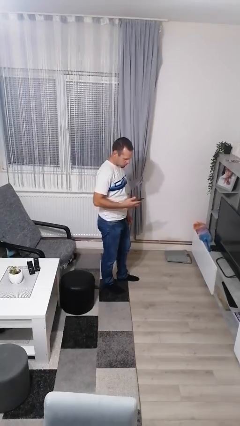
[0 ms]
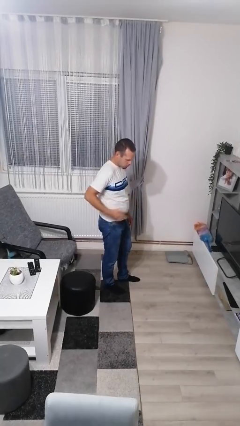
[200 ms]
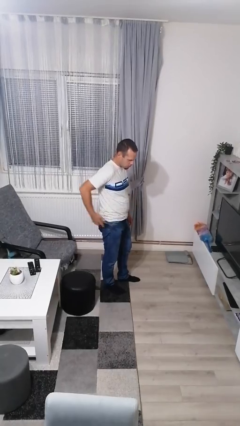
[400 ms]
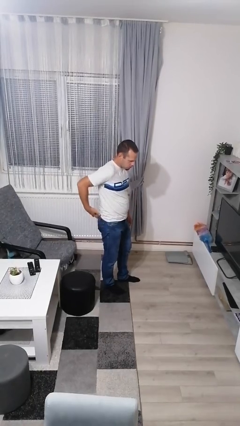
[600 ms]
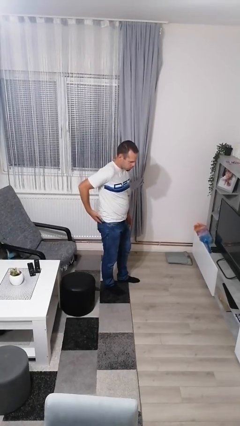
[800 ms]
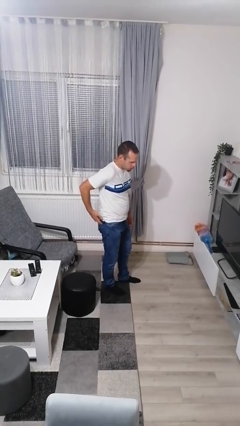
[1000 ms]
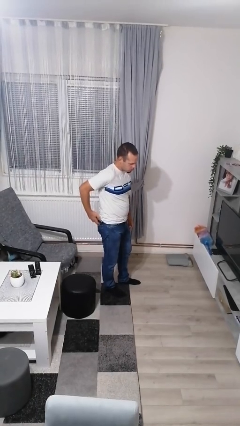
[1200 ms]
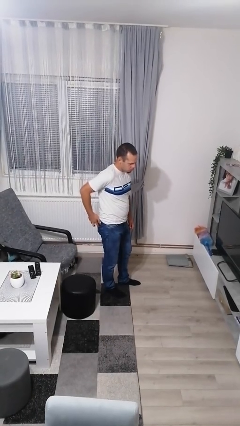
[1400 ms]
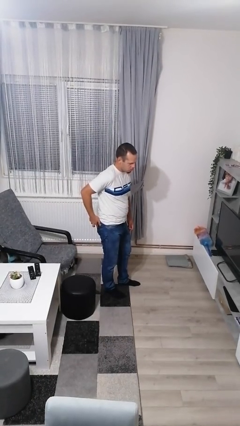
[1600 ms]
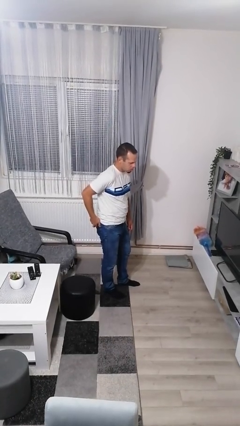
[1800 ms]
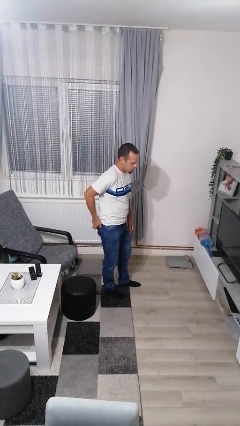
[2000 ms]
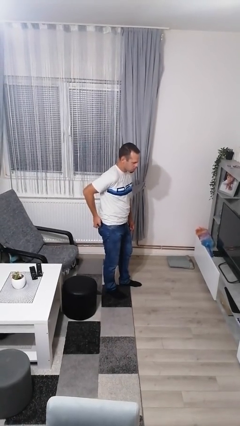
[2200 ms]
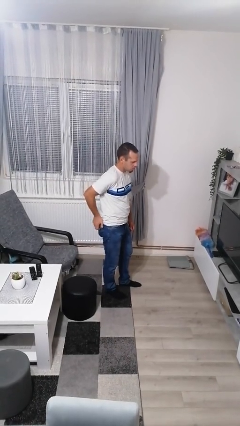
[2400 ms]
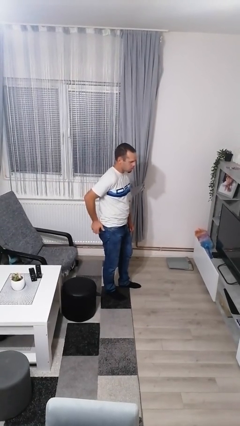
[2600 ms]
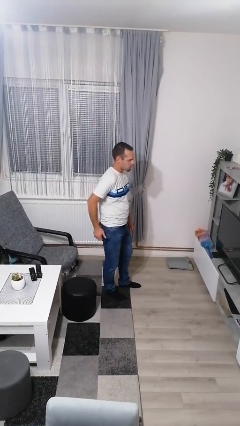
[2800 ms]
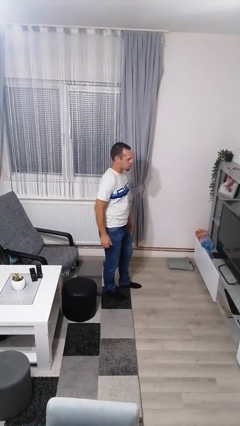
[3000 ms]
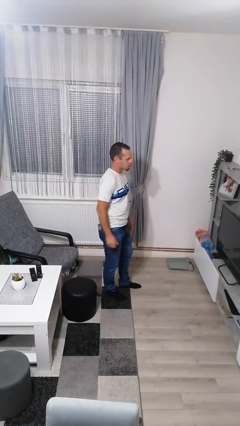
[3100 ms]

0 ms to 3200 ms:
person puts phone into pocket

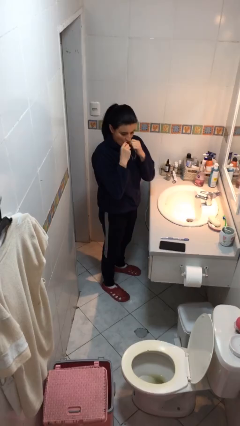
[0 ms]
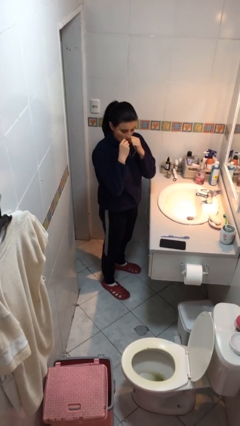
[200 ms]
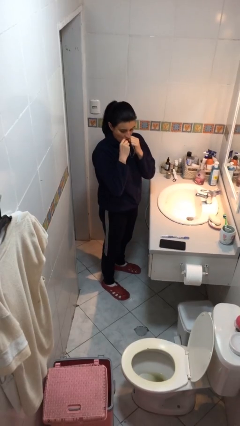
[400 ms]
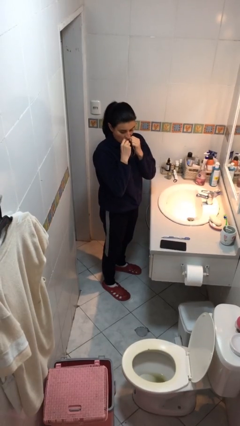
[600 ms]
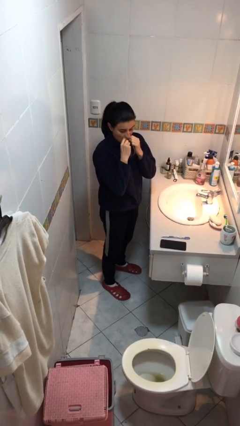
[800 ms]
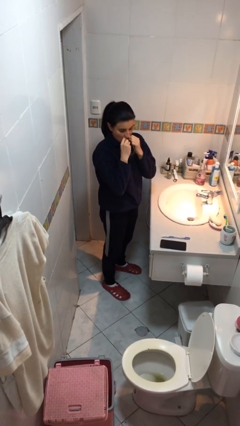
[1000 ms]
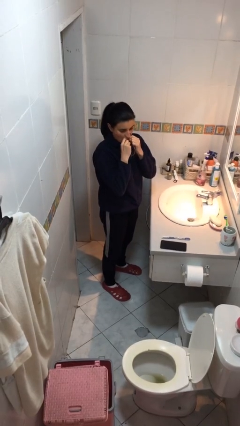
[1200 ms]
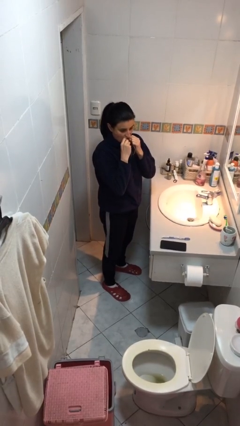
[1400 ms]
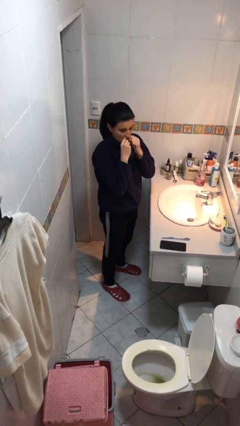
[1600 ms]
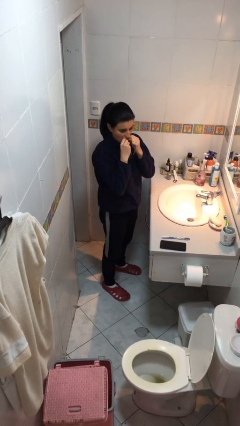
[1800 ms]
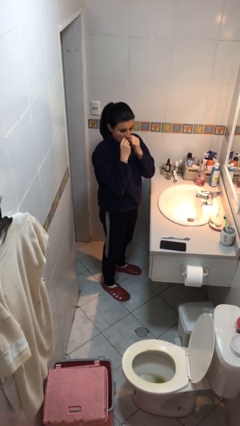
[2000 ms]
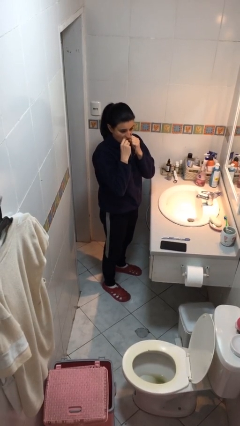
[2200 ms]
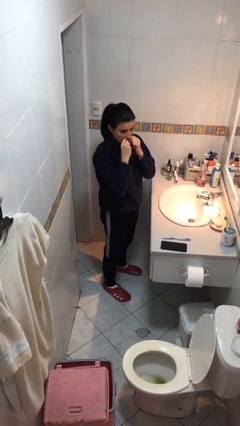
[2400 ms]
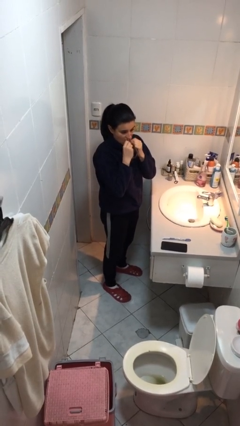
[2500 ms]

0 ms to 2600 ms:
person flosses

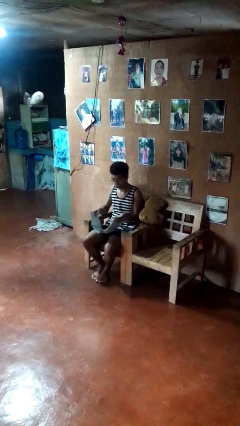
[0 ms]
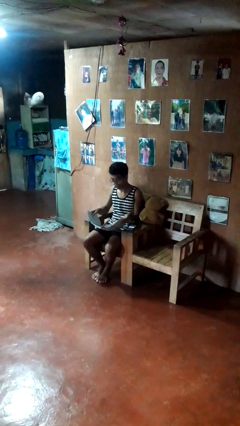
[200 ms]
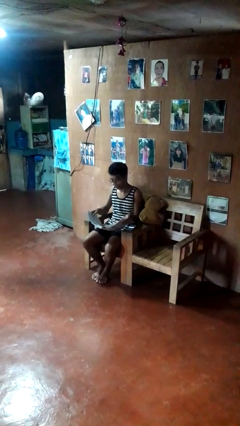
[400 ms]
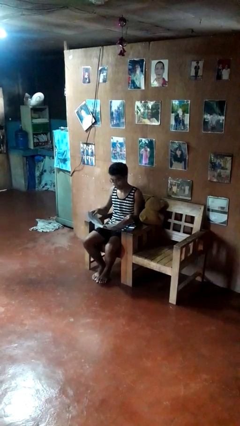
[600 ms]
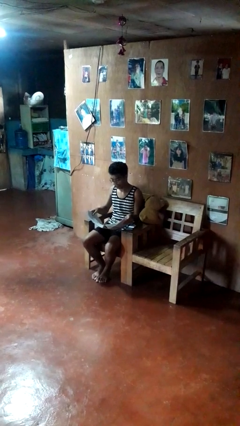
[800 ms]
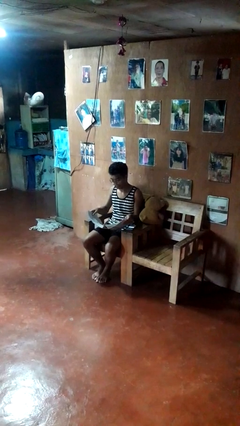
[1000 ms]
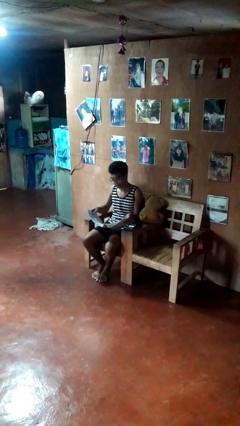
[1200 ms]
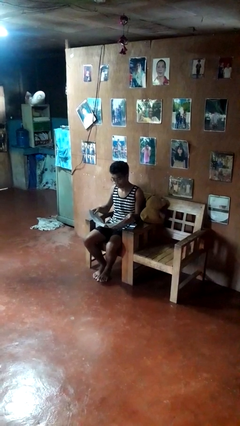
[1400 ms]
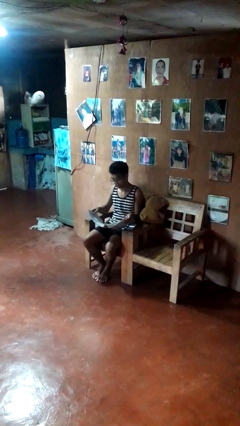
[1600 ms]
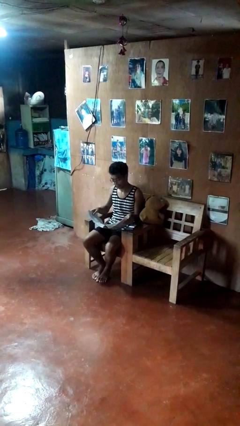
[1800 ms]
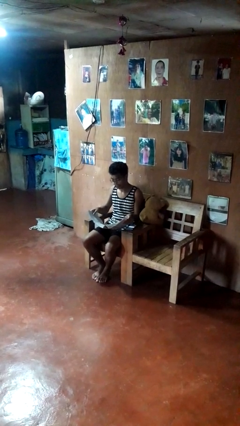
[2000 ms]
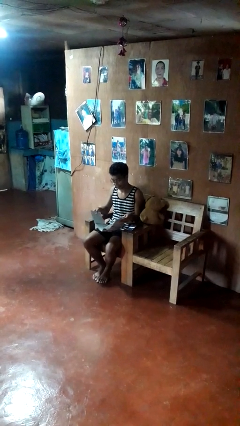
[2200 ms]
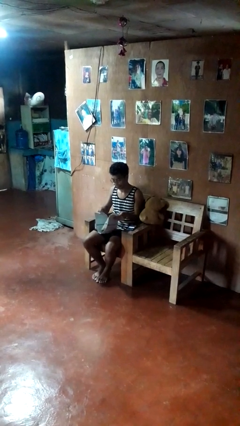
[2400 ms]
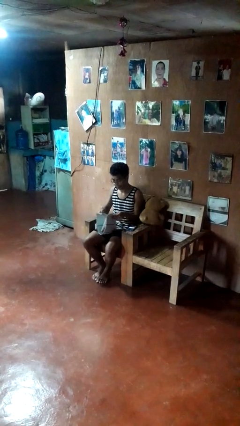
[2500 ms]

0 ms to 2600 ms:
person reads newspaper

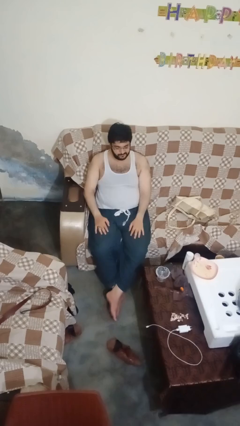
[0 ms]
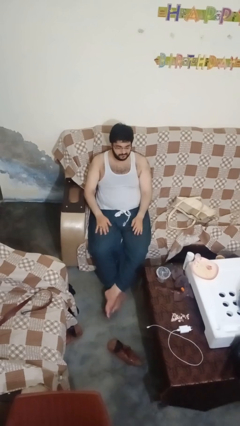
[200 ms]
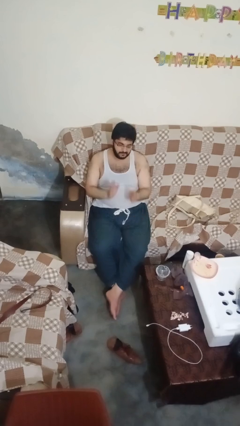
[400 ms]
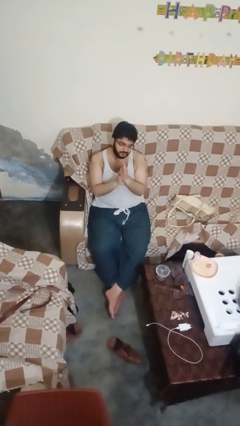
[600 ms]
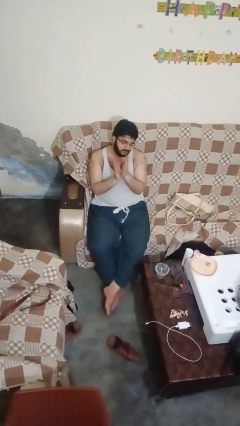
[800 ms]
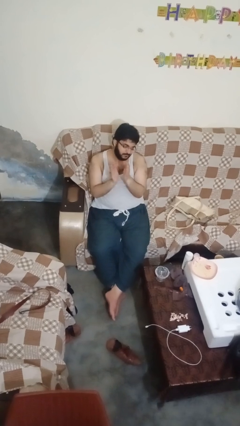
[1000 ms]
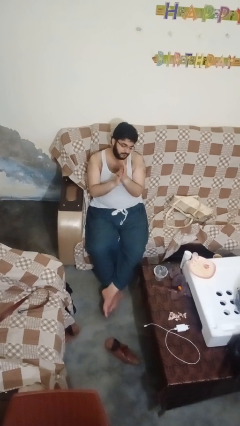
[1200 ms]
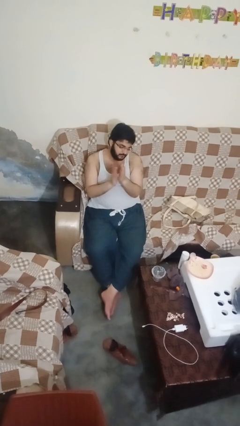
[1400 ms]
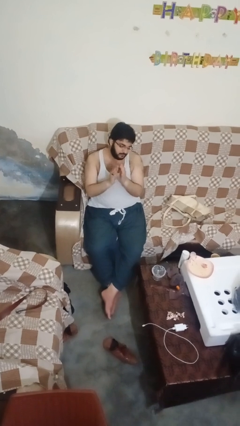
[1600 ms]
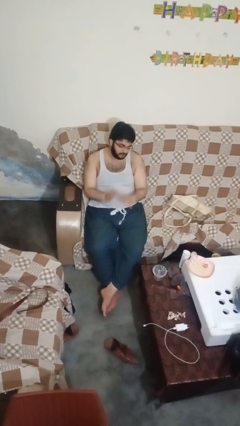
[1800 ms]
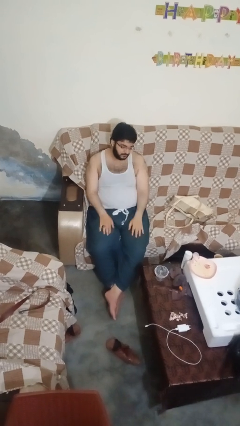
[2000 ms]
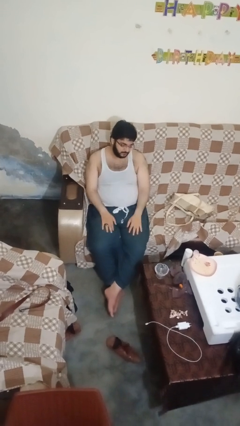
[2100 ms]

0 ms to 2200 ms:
person claps hands

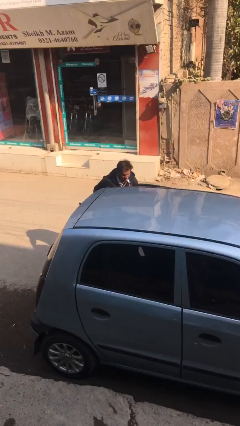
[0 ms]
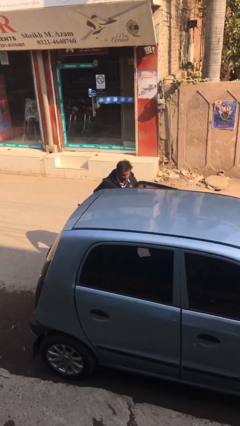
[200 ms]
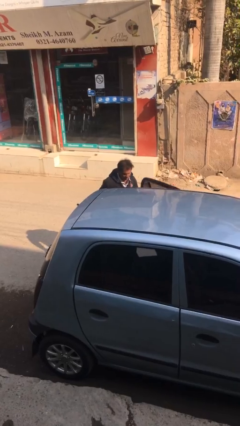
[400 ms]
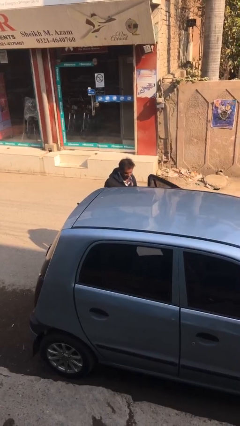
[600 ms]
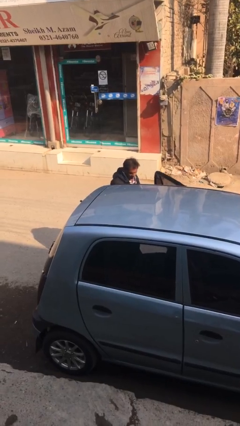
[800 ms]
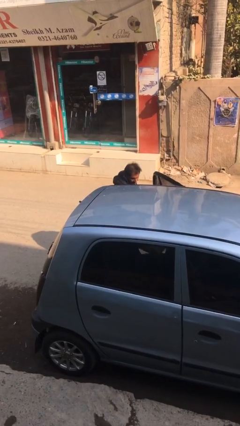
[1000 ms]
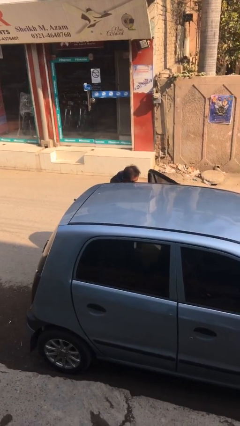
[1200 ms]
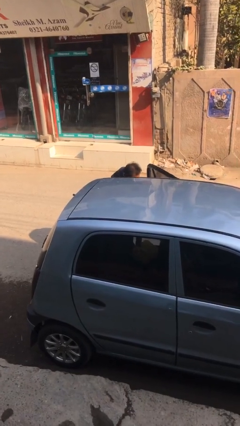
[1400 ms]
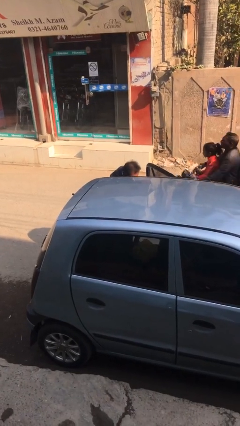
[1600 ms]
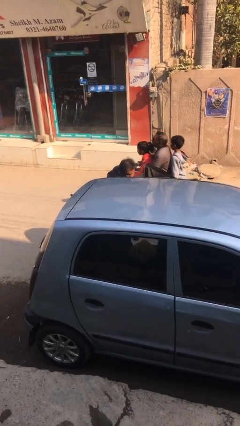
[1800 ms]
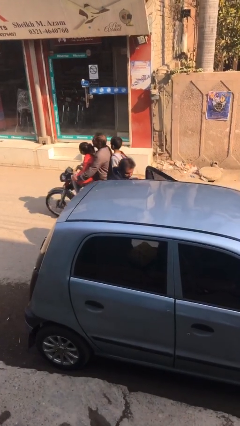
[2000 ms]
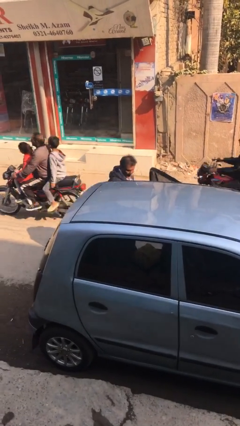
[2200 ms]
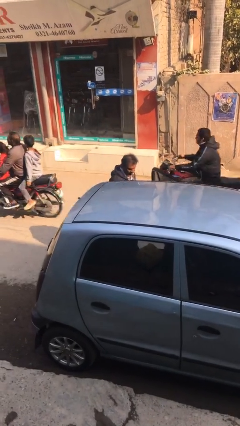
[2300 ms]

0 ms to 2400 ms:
person loads car

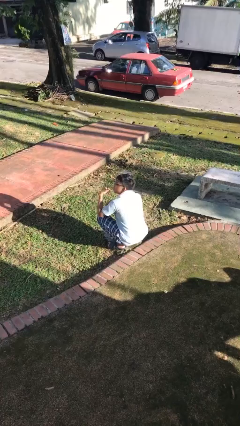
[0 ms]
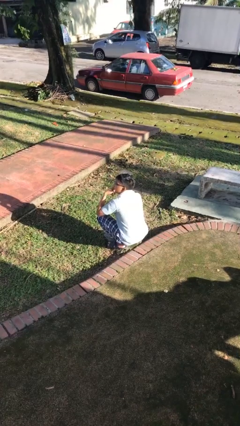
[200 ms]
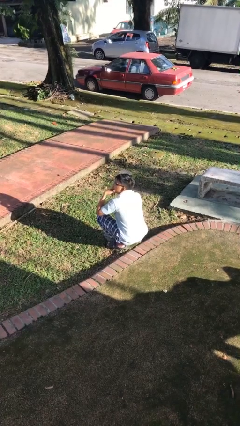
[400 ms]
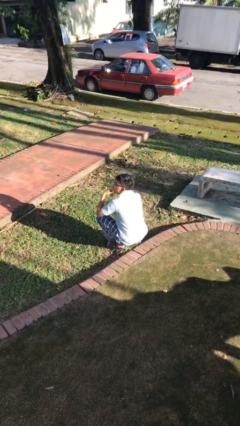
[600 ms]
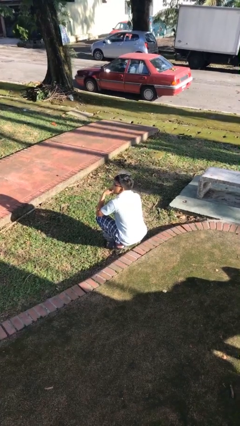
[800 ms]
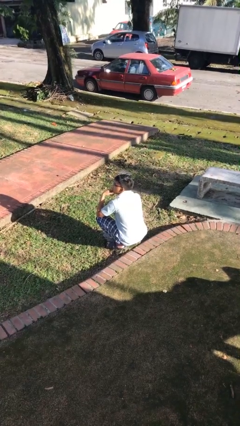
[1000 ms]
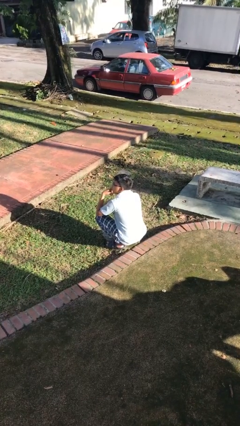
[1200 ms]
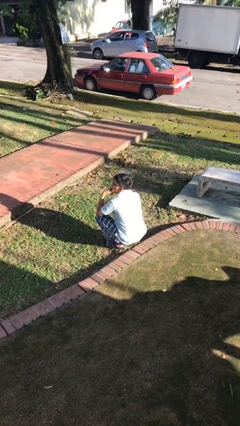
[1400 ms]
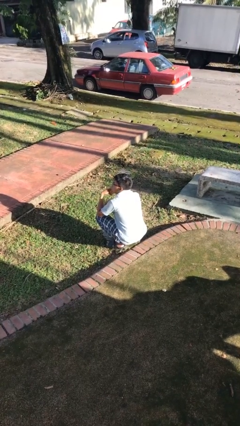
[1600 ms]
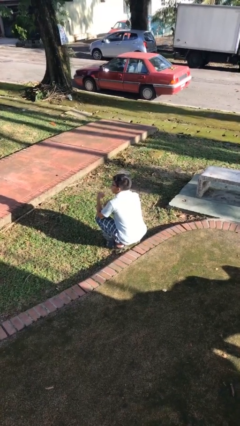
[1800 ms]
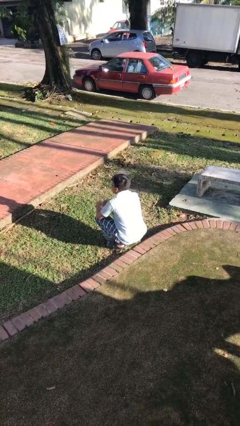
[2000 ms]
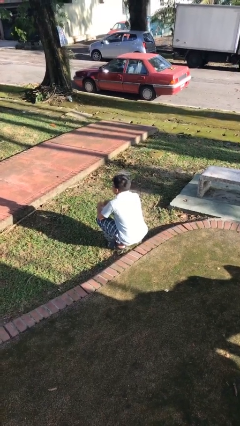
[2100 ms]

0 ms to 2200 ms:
person strokes chin

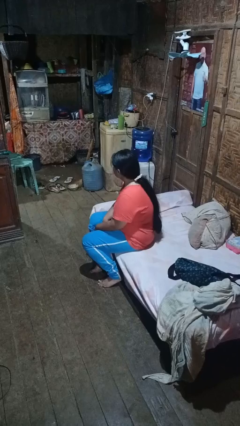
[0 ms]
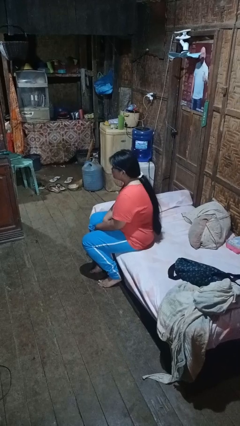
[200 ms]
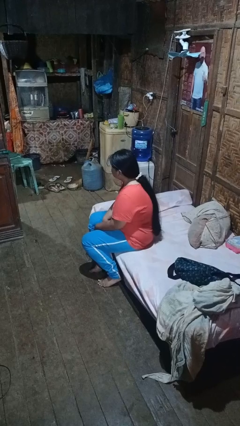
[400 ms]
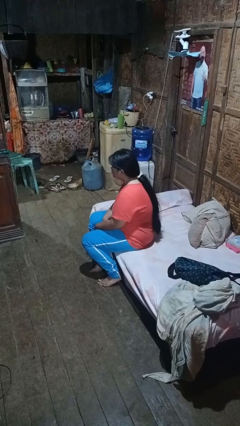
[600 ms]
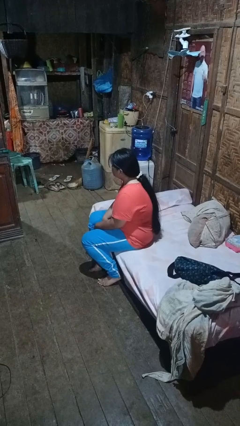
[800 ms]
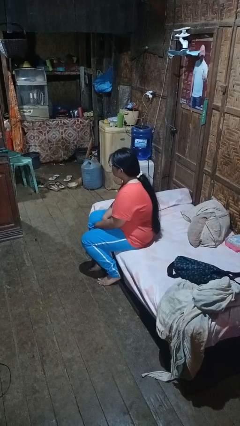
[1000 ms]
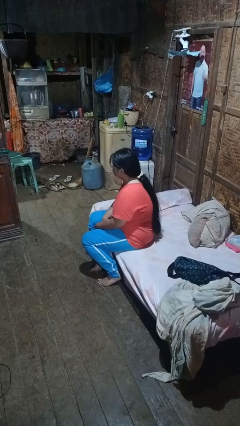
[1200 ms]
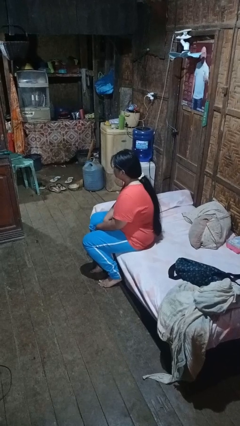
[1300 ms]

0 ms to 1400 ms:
person shakes head
